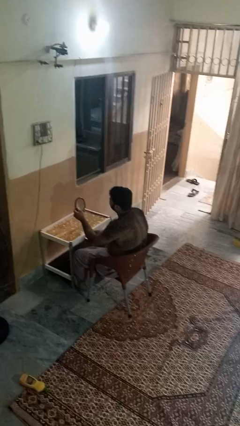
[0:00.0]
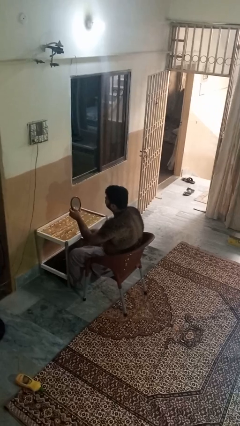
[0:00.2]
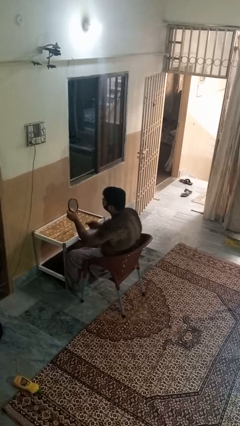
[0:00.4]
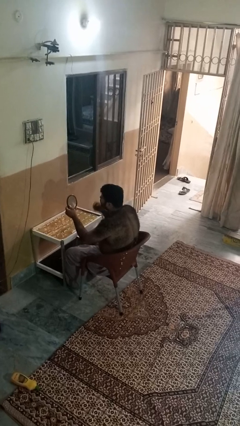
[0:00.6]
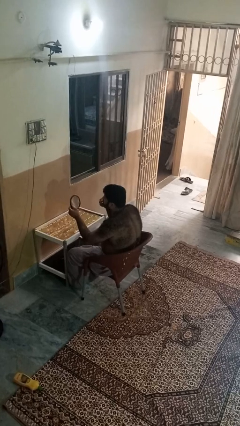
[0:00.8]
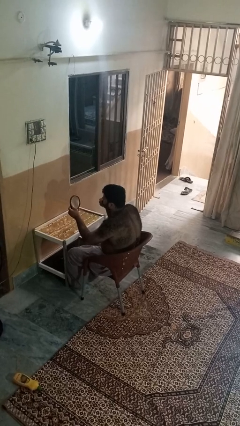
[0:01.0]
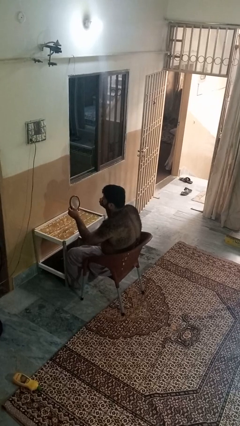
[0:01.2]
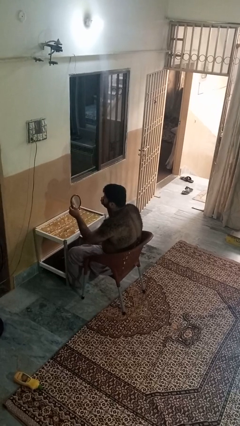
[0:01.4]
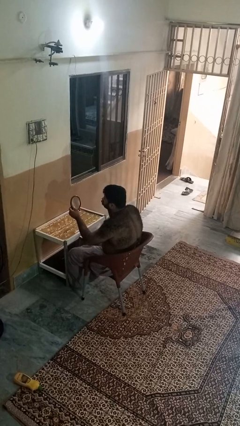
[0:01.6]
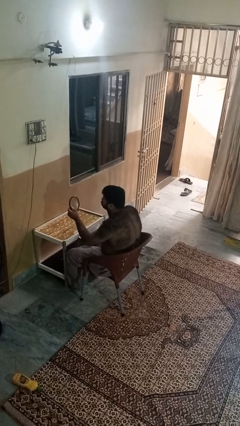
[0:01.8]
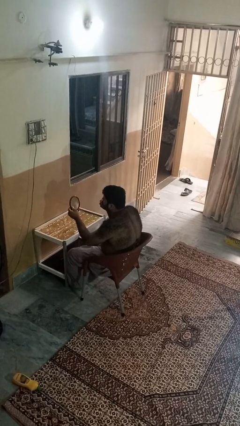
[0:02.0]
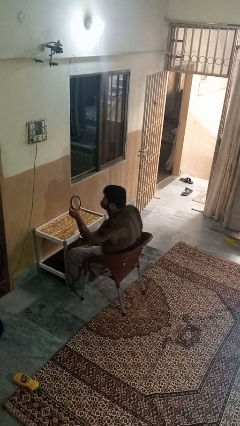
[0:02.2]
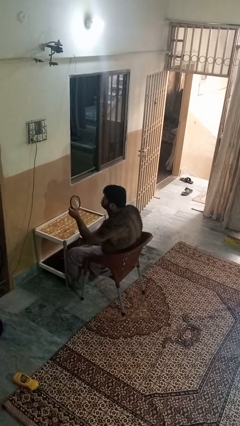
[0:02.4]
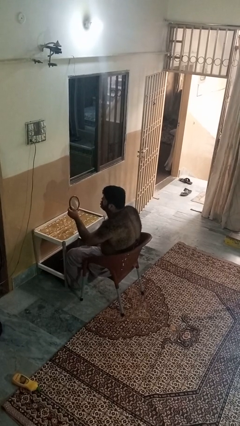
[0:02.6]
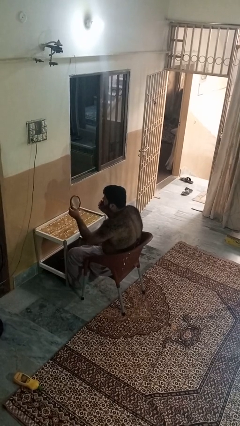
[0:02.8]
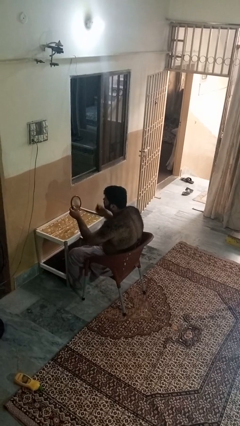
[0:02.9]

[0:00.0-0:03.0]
person applies lip makeup

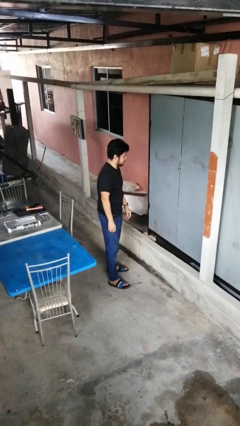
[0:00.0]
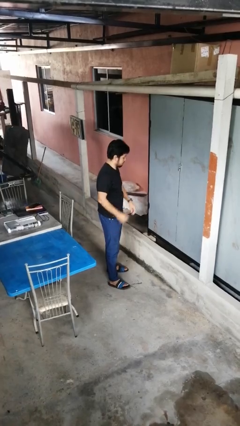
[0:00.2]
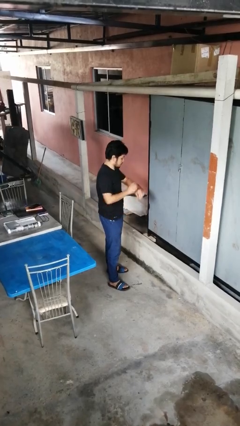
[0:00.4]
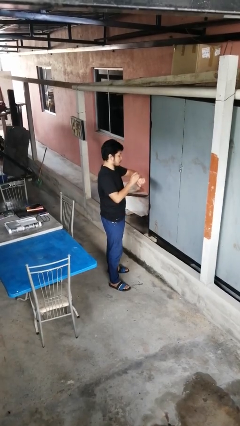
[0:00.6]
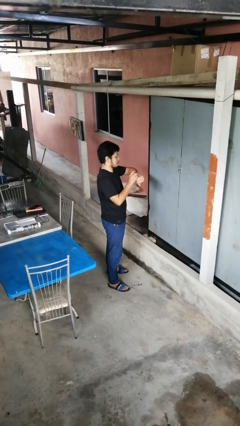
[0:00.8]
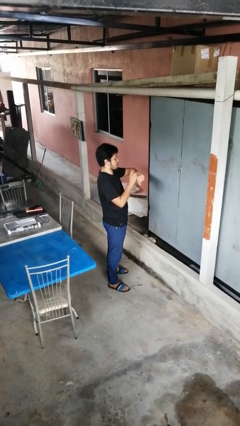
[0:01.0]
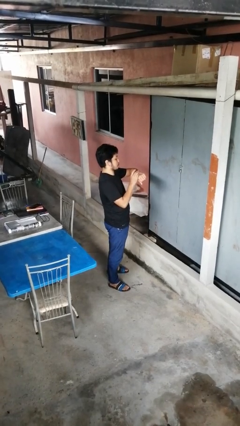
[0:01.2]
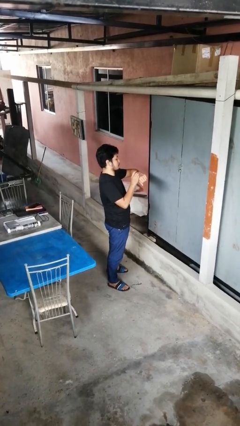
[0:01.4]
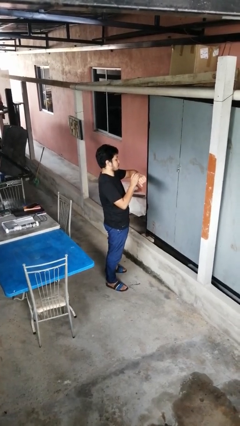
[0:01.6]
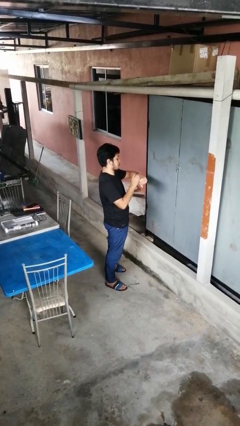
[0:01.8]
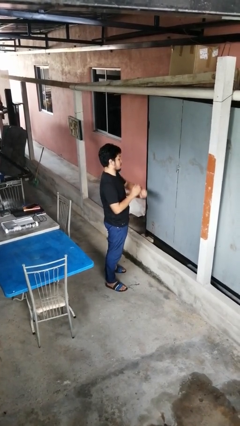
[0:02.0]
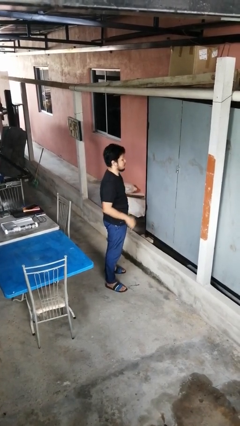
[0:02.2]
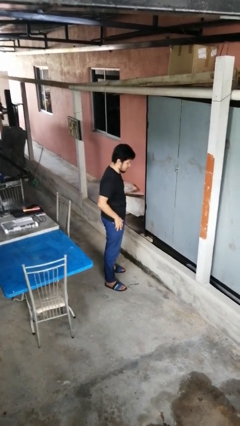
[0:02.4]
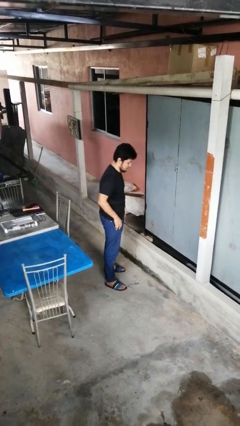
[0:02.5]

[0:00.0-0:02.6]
person looks at wristwatch

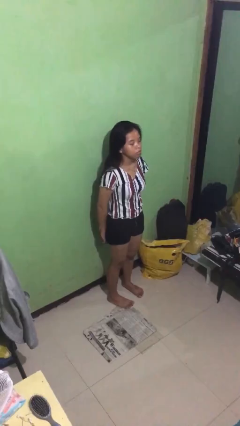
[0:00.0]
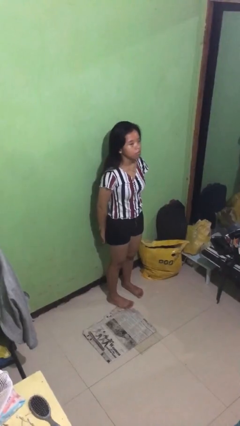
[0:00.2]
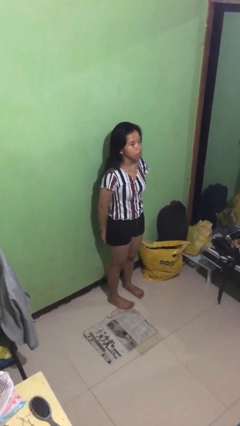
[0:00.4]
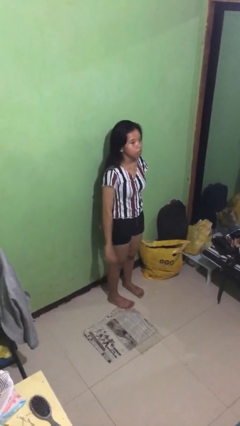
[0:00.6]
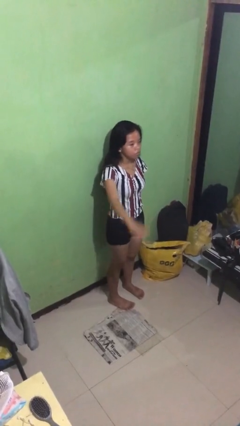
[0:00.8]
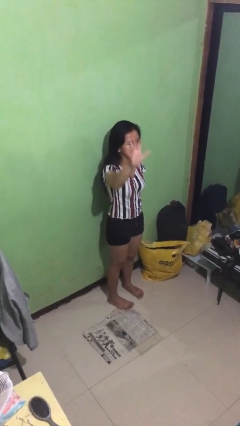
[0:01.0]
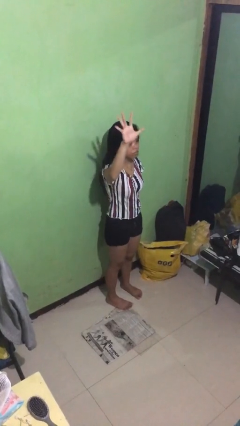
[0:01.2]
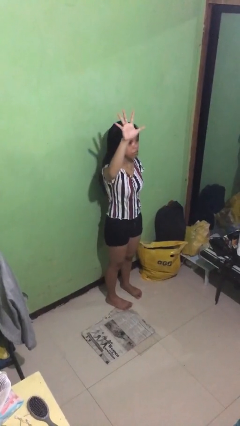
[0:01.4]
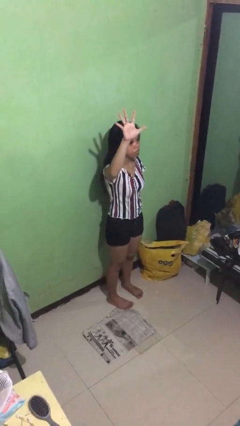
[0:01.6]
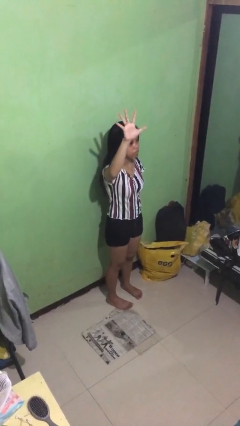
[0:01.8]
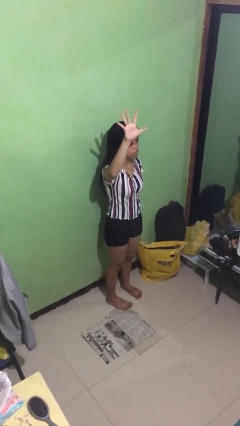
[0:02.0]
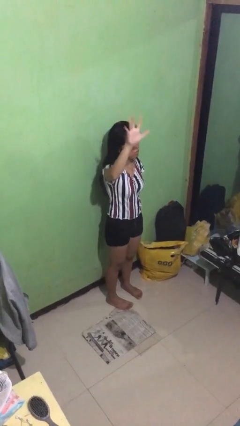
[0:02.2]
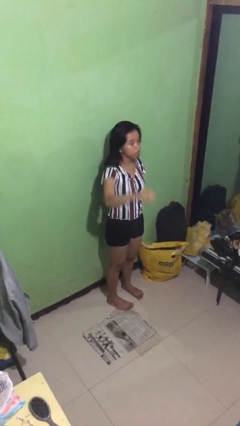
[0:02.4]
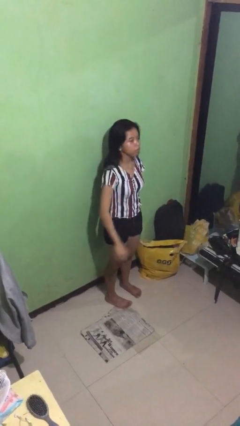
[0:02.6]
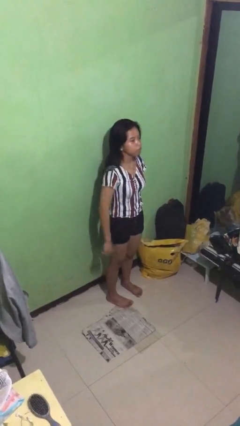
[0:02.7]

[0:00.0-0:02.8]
person gestures number five

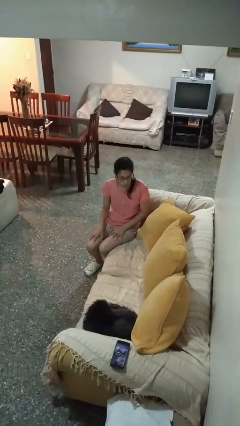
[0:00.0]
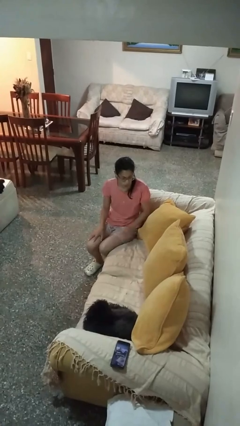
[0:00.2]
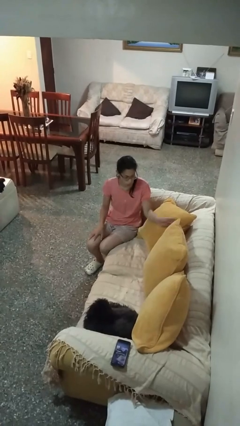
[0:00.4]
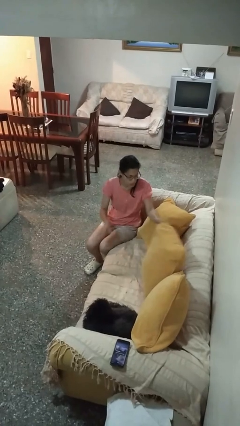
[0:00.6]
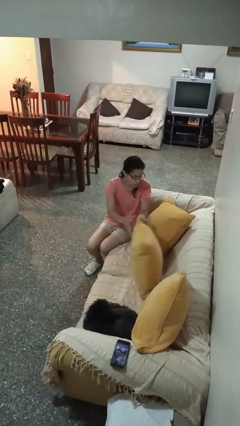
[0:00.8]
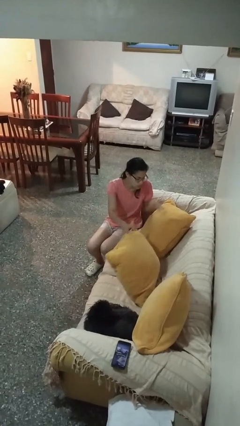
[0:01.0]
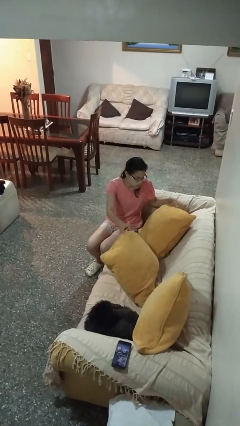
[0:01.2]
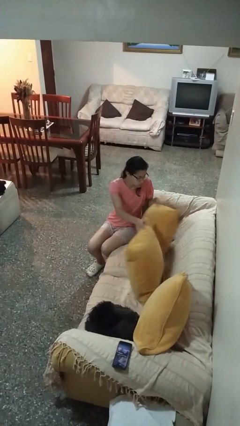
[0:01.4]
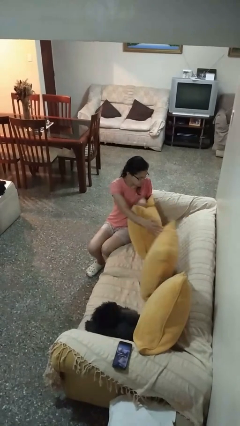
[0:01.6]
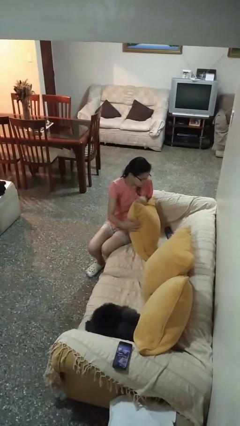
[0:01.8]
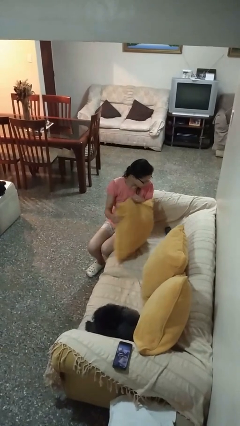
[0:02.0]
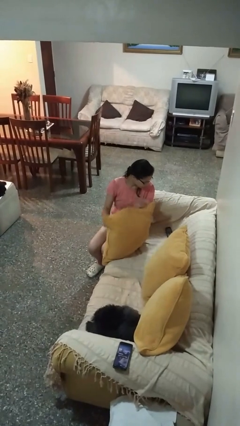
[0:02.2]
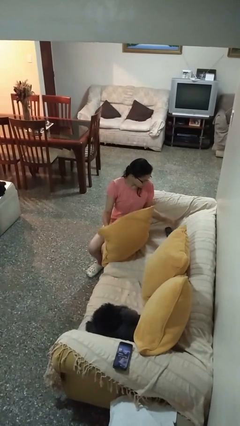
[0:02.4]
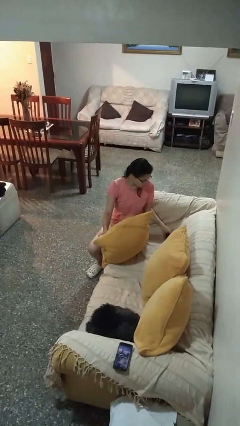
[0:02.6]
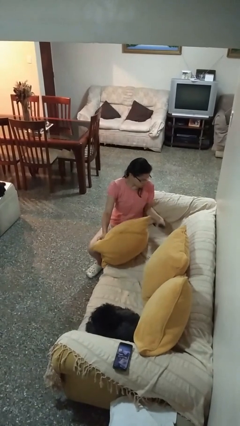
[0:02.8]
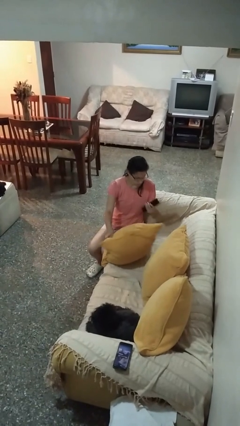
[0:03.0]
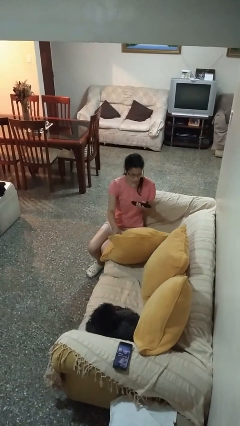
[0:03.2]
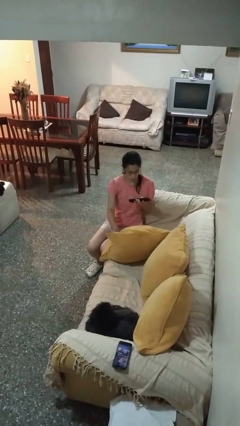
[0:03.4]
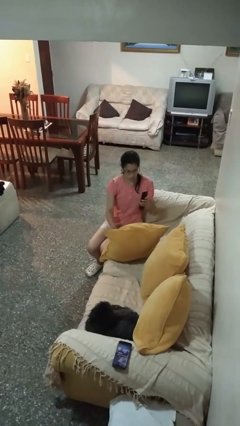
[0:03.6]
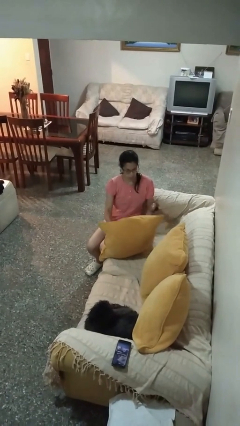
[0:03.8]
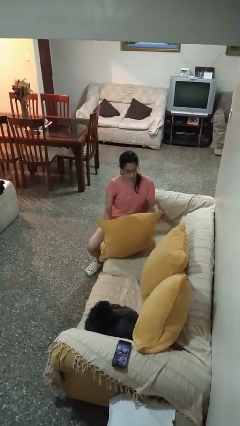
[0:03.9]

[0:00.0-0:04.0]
person searches in couch

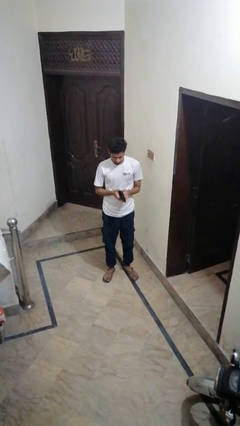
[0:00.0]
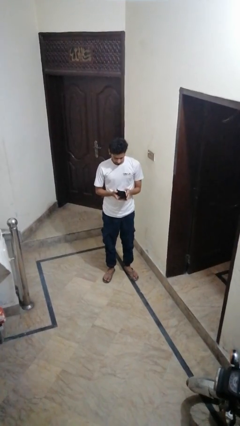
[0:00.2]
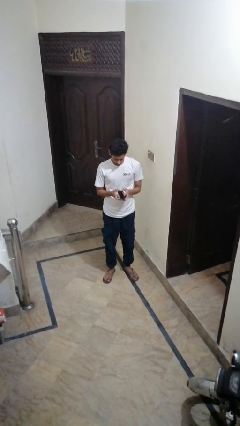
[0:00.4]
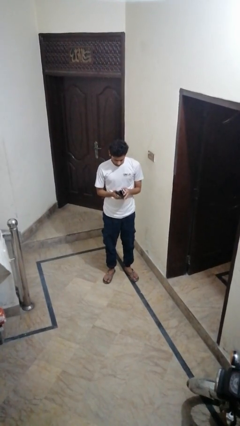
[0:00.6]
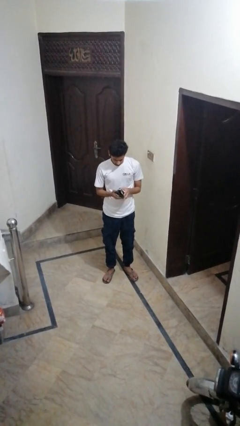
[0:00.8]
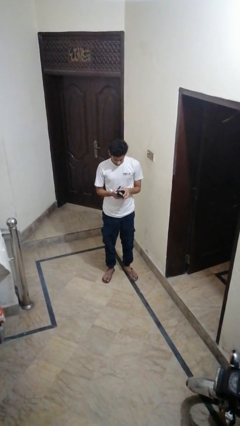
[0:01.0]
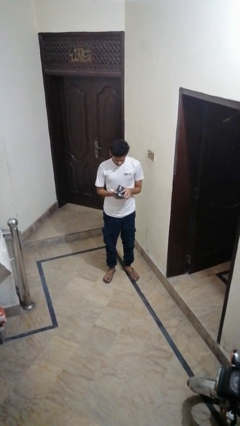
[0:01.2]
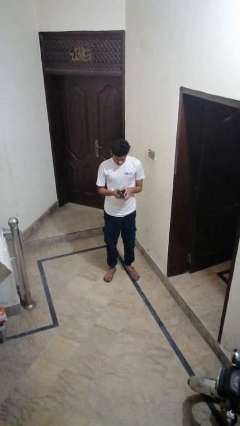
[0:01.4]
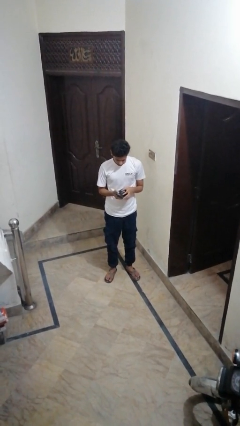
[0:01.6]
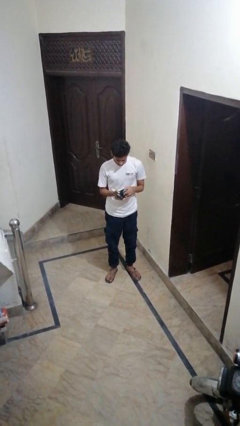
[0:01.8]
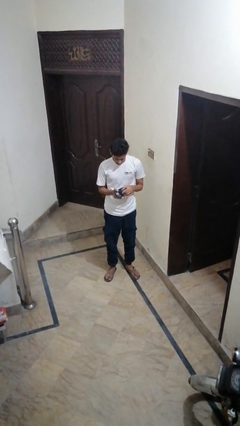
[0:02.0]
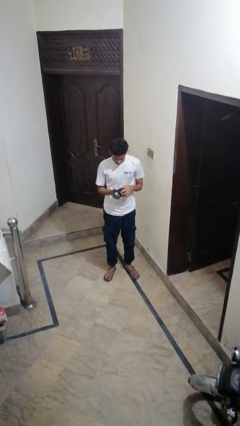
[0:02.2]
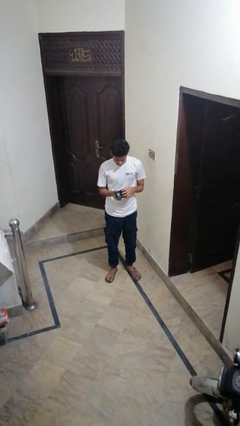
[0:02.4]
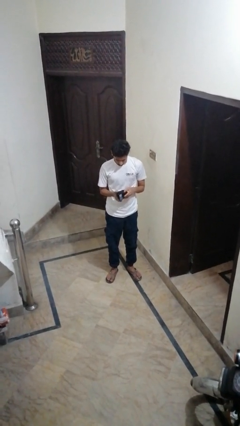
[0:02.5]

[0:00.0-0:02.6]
person searches in purse

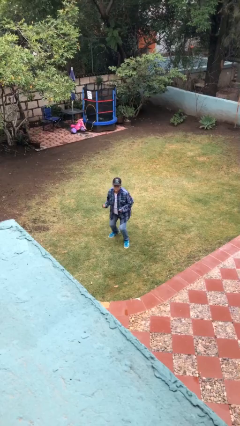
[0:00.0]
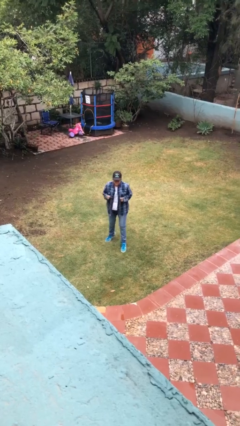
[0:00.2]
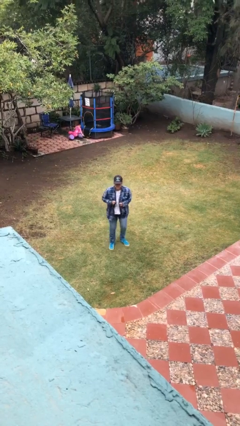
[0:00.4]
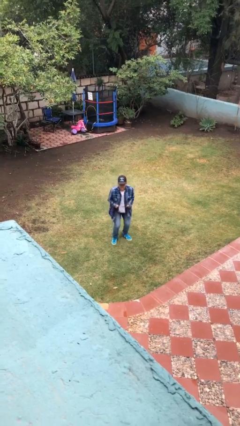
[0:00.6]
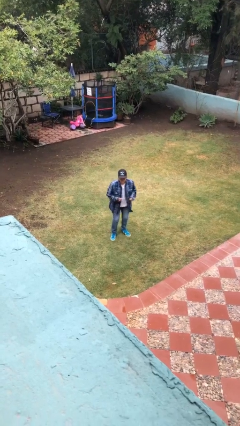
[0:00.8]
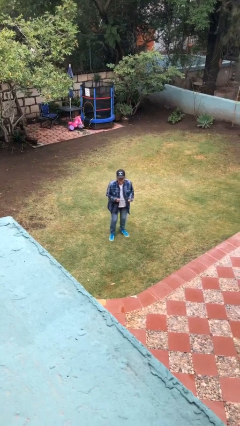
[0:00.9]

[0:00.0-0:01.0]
person jumps

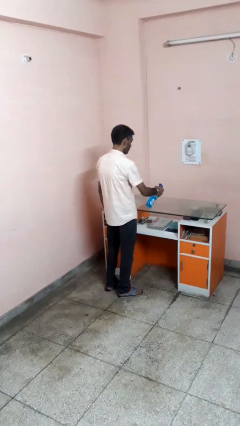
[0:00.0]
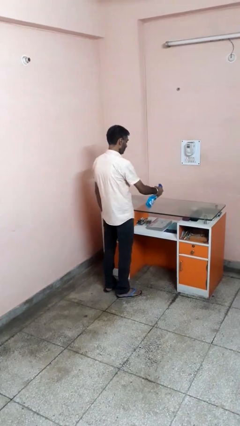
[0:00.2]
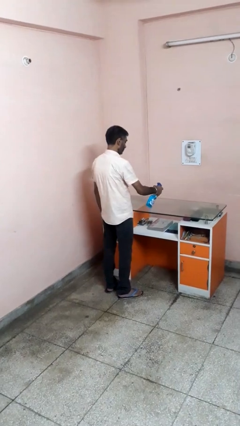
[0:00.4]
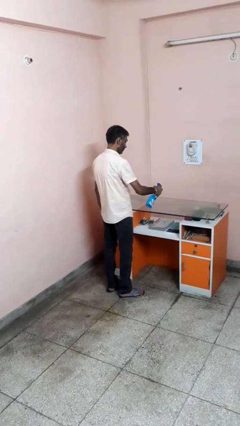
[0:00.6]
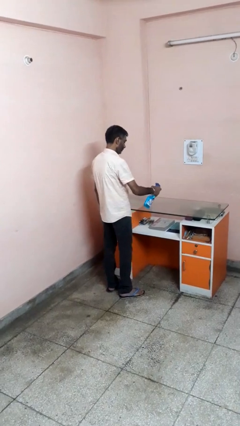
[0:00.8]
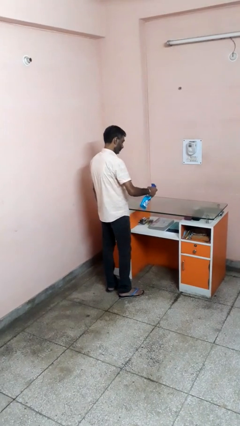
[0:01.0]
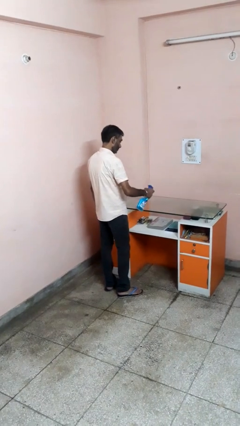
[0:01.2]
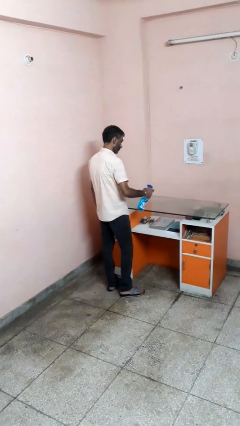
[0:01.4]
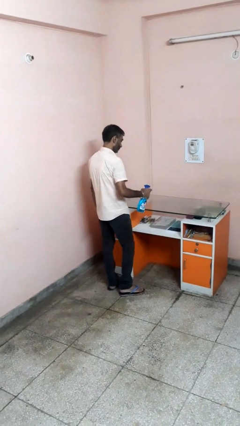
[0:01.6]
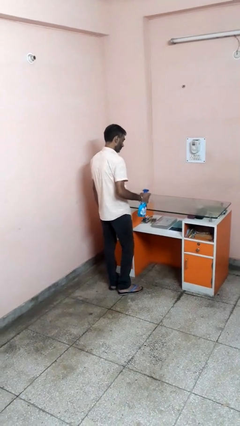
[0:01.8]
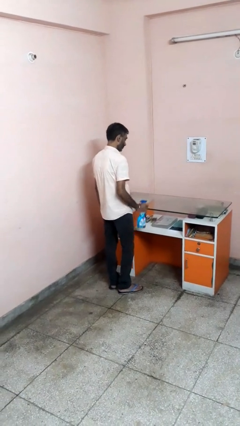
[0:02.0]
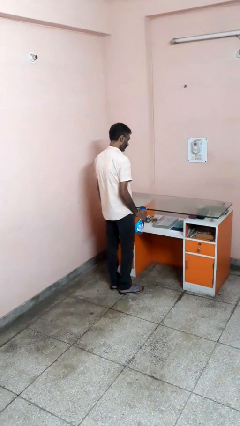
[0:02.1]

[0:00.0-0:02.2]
person sprays from bottle
